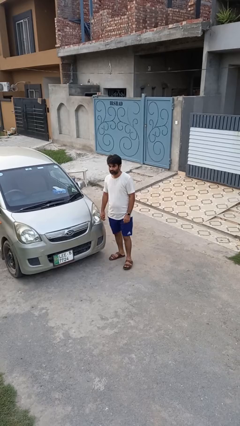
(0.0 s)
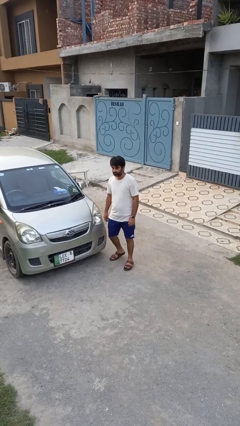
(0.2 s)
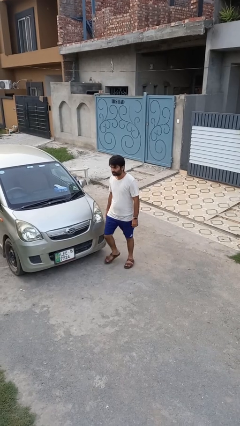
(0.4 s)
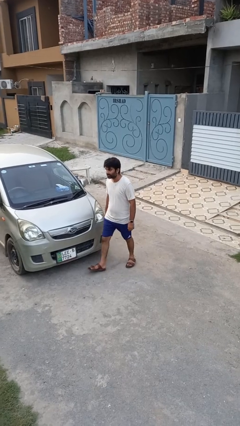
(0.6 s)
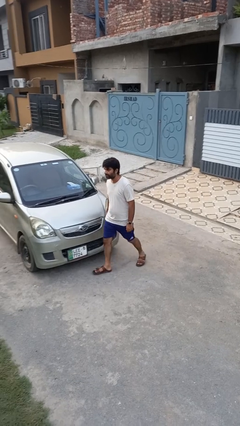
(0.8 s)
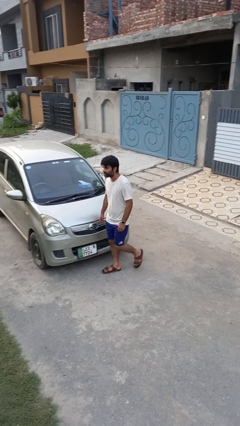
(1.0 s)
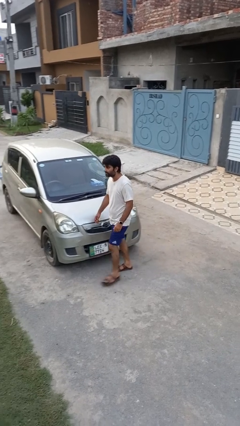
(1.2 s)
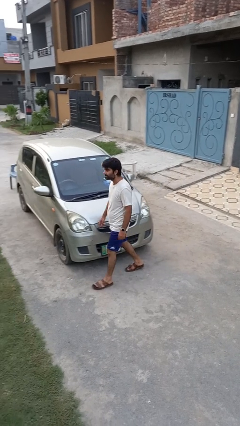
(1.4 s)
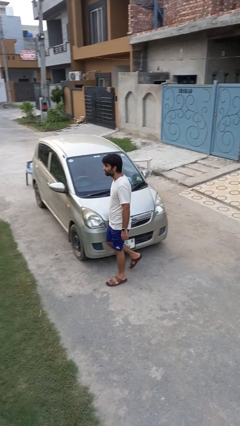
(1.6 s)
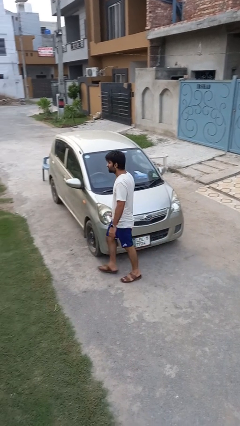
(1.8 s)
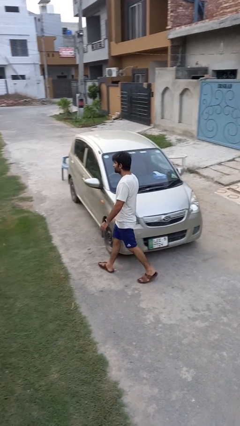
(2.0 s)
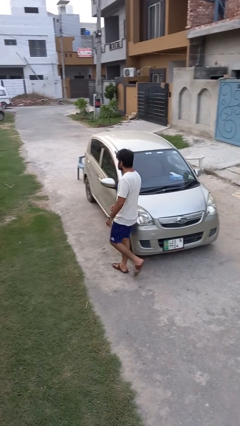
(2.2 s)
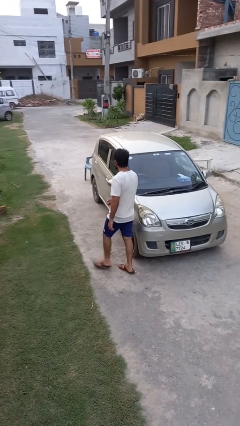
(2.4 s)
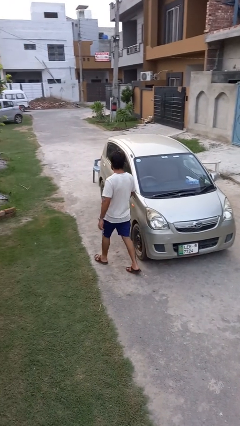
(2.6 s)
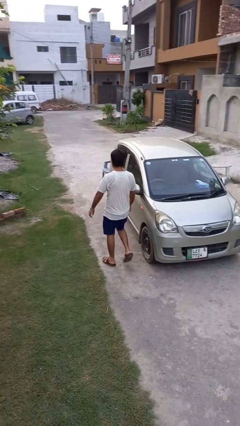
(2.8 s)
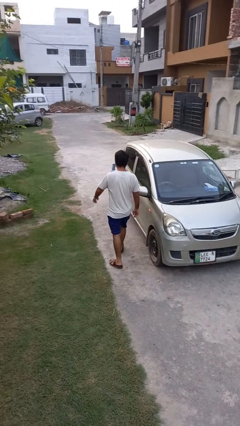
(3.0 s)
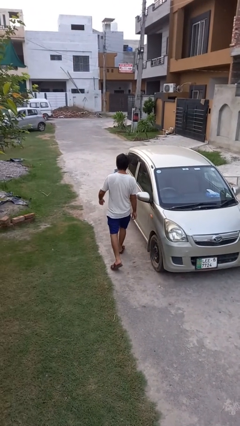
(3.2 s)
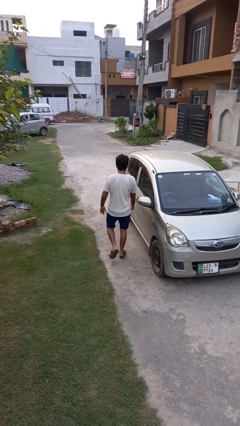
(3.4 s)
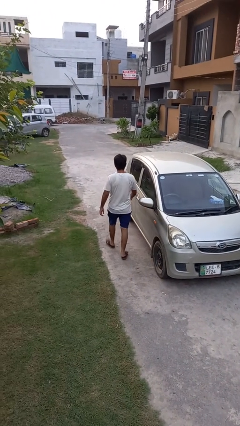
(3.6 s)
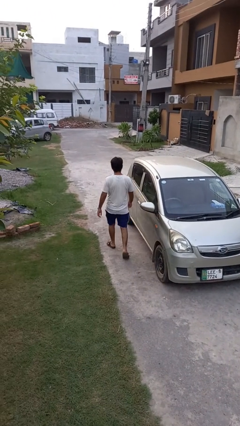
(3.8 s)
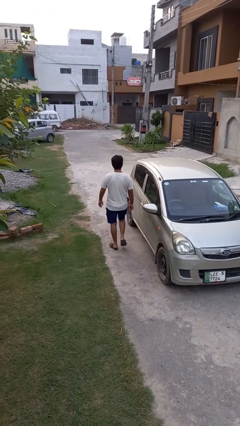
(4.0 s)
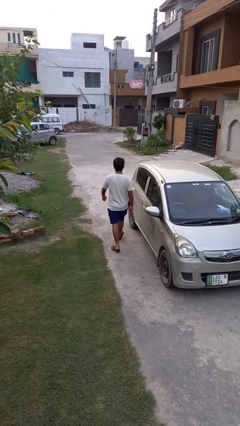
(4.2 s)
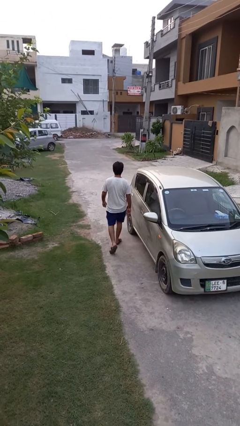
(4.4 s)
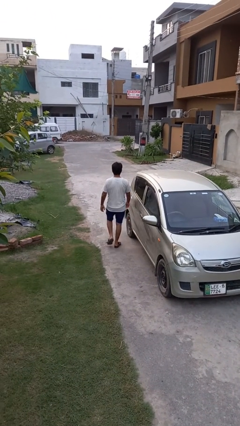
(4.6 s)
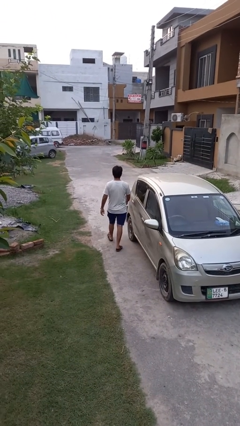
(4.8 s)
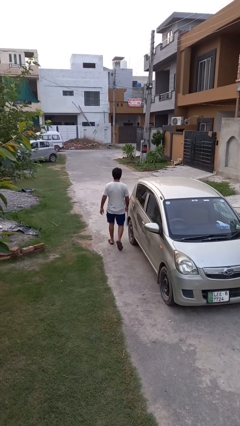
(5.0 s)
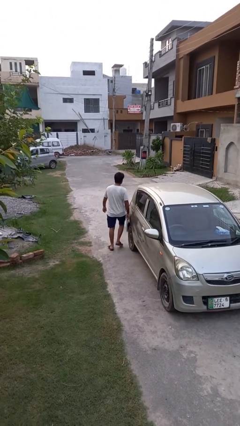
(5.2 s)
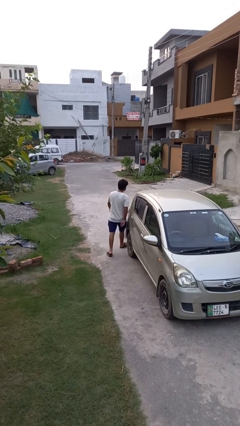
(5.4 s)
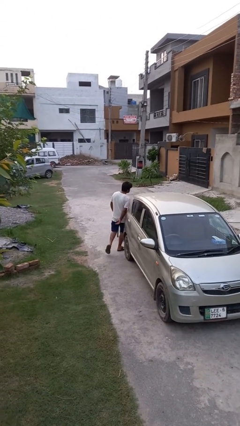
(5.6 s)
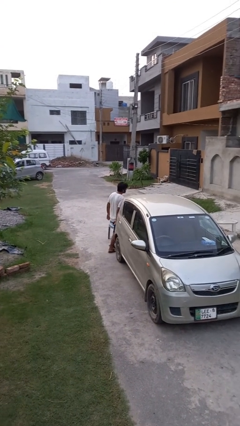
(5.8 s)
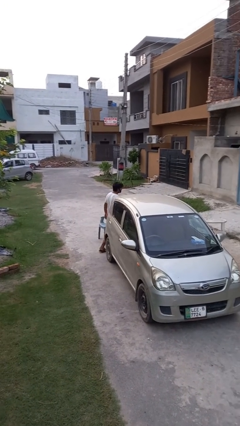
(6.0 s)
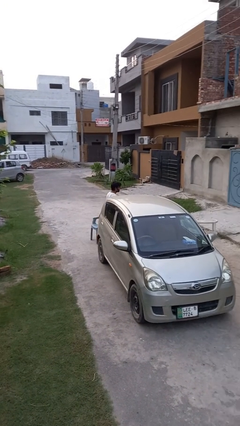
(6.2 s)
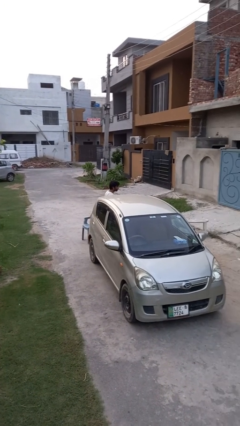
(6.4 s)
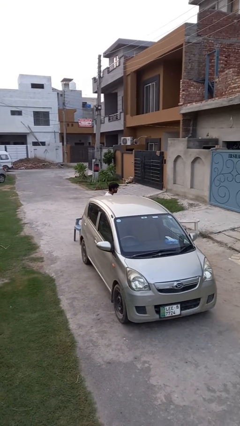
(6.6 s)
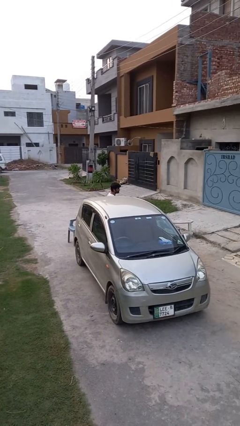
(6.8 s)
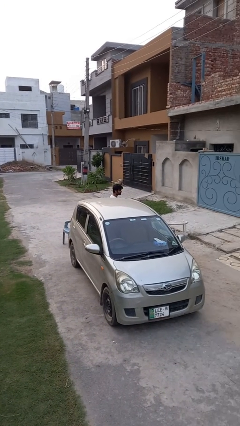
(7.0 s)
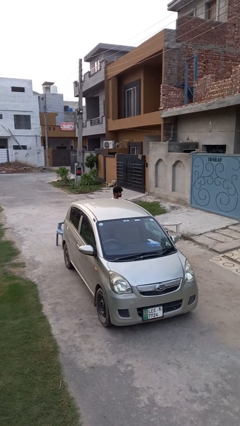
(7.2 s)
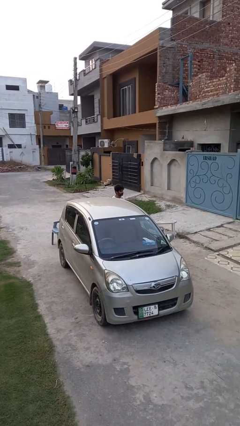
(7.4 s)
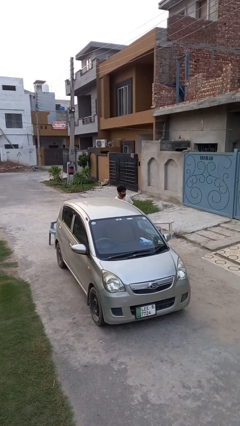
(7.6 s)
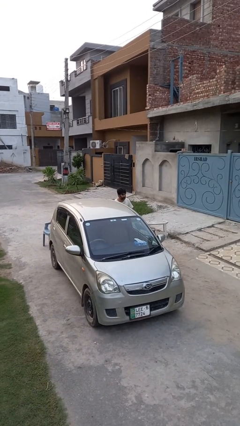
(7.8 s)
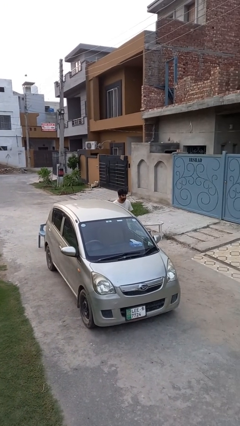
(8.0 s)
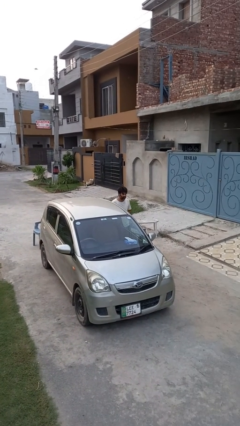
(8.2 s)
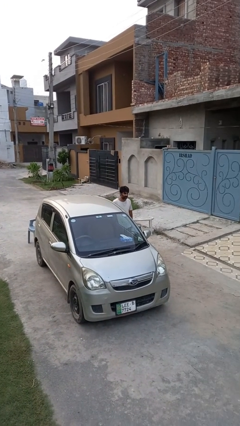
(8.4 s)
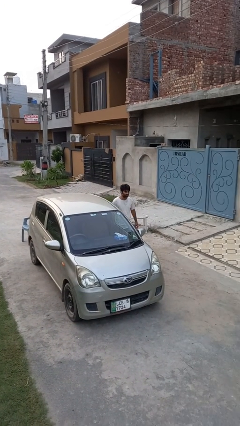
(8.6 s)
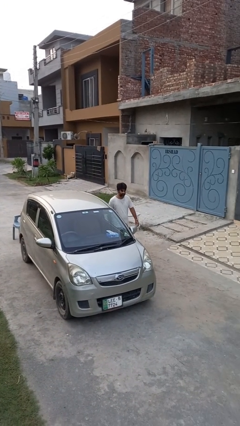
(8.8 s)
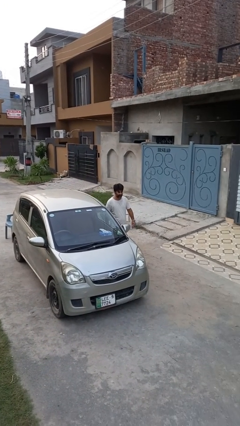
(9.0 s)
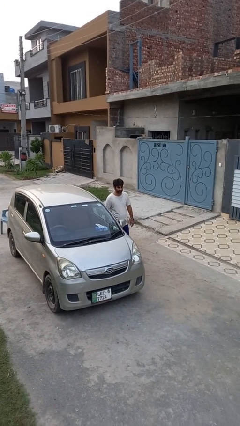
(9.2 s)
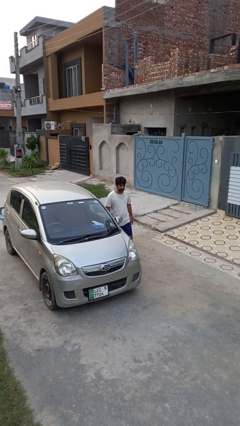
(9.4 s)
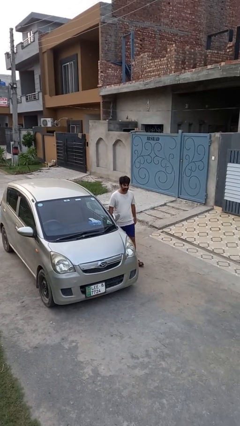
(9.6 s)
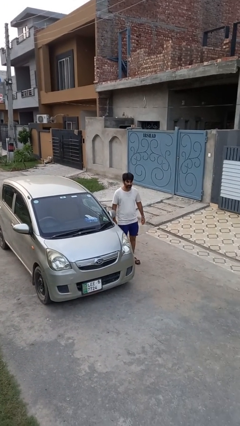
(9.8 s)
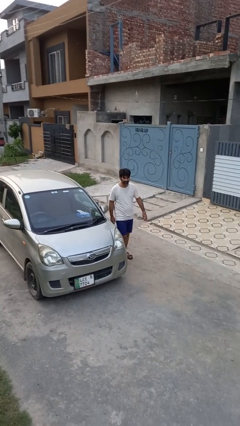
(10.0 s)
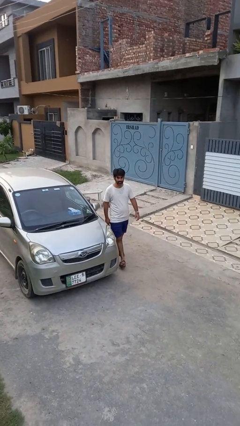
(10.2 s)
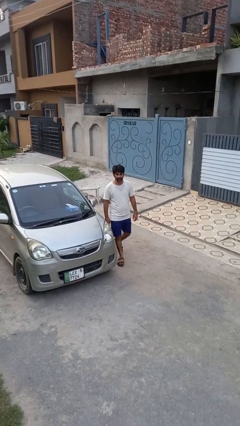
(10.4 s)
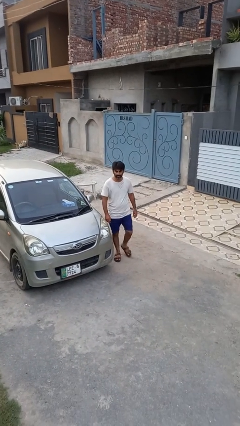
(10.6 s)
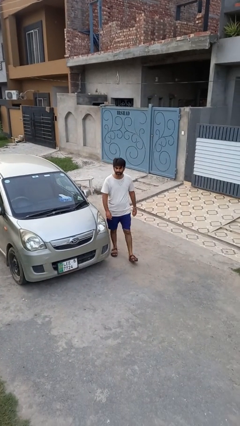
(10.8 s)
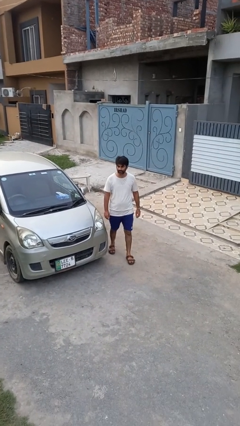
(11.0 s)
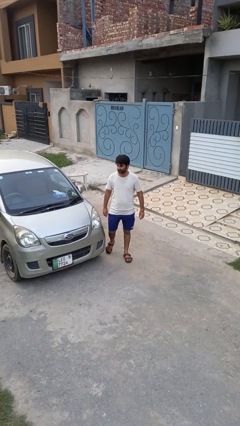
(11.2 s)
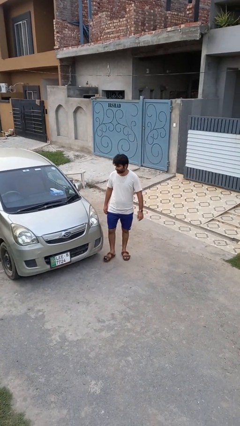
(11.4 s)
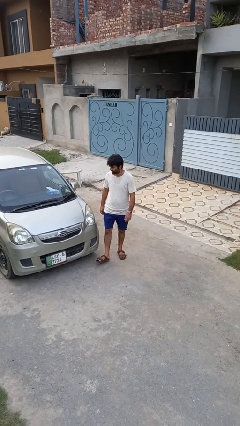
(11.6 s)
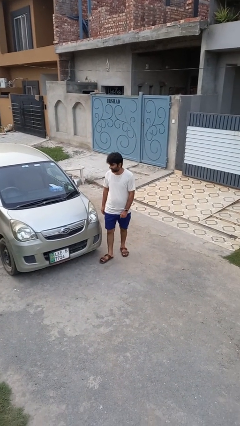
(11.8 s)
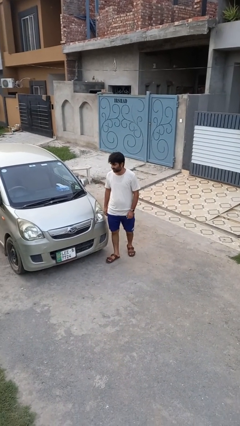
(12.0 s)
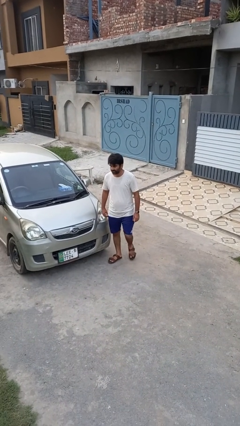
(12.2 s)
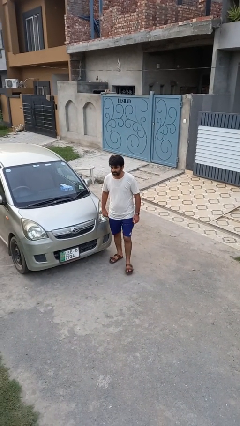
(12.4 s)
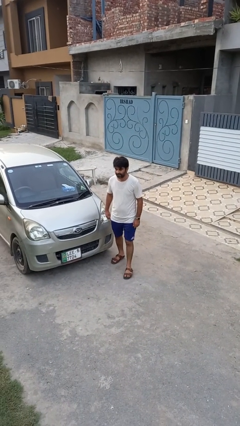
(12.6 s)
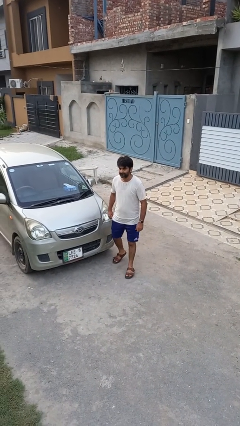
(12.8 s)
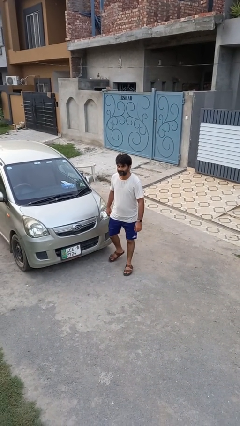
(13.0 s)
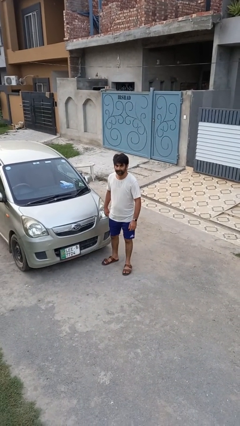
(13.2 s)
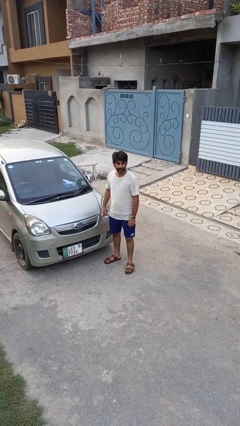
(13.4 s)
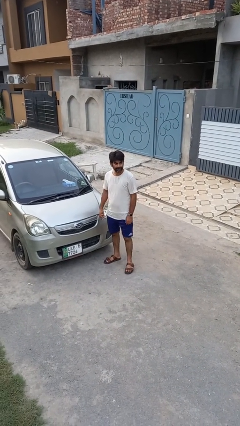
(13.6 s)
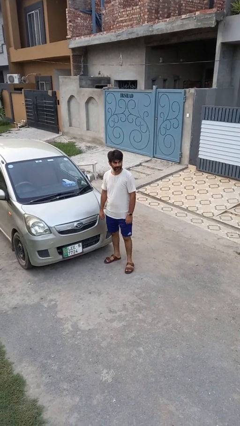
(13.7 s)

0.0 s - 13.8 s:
person walks around car

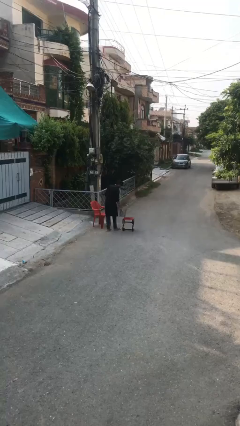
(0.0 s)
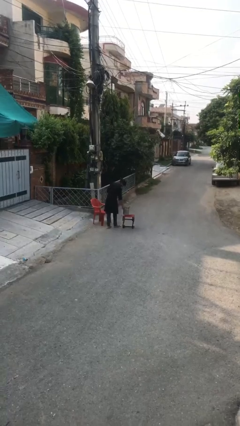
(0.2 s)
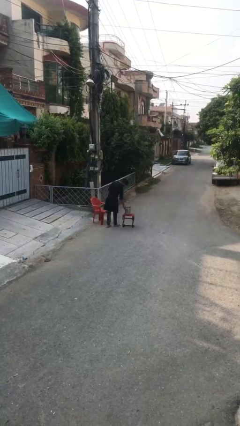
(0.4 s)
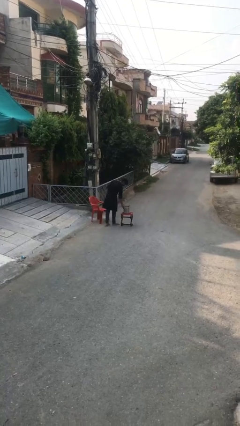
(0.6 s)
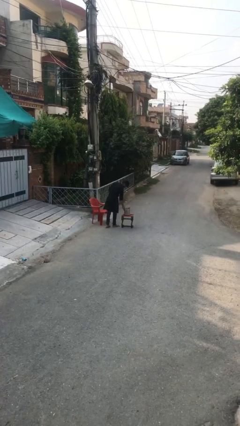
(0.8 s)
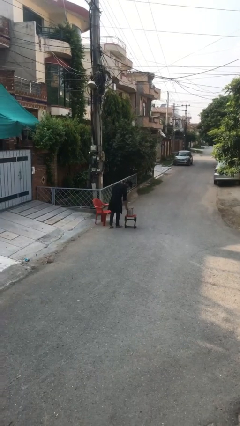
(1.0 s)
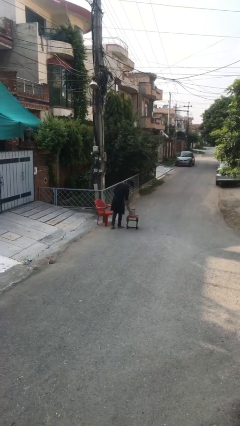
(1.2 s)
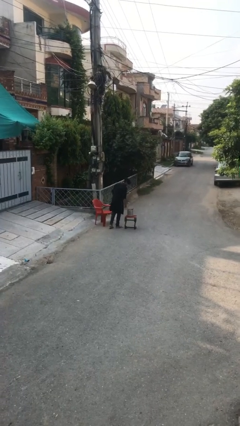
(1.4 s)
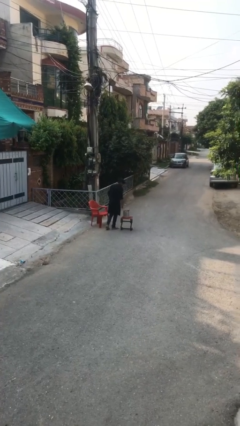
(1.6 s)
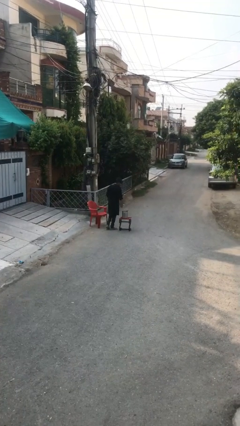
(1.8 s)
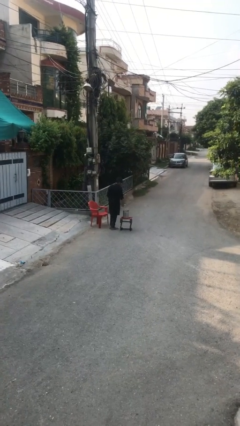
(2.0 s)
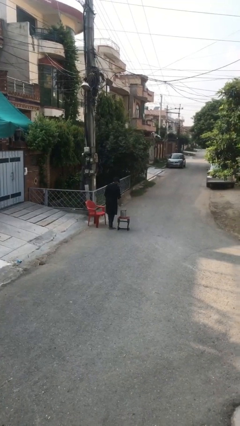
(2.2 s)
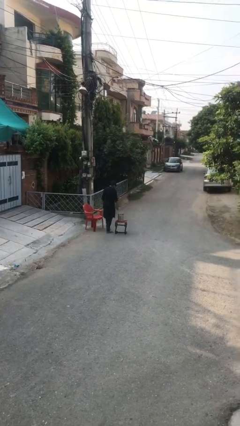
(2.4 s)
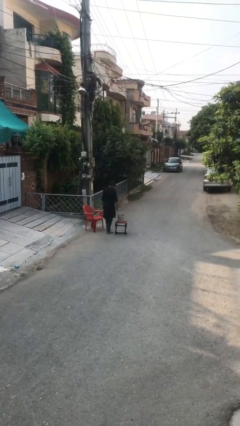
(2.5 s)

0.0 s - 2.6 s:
person puts down object on table

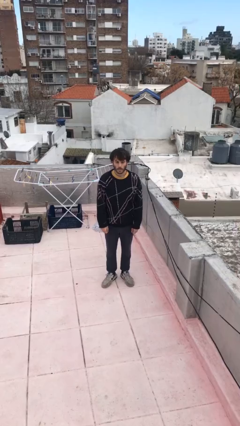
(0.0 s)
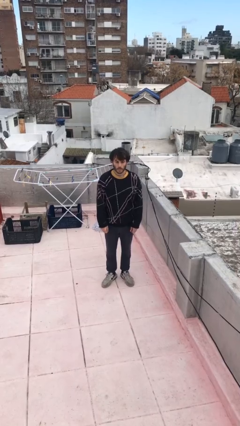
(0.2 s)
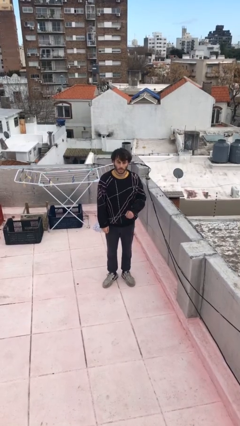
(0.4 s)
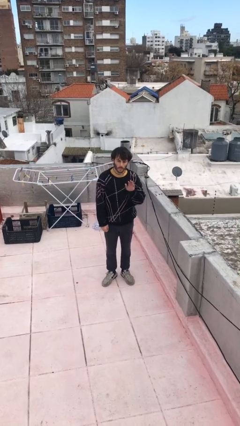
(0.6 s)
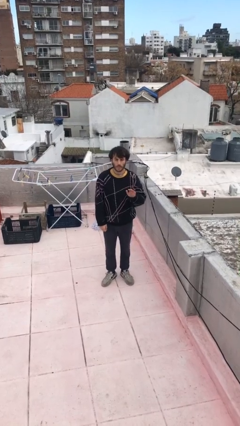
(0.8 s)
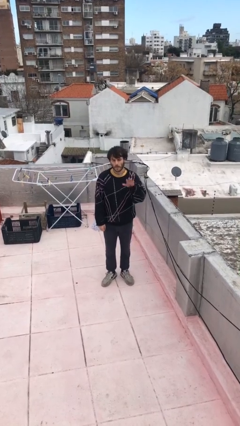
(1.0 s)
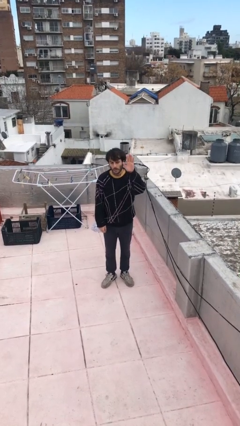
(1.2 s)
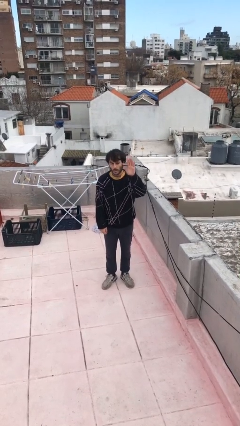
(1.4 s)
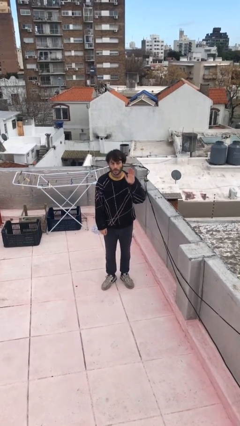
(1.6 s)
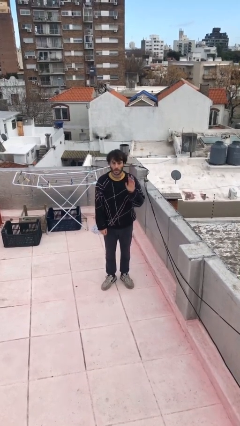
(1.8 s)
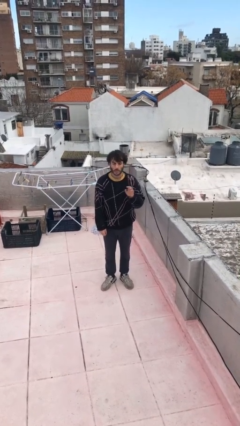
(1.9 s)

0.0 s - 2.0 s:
person gestures swipe up
